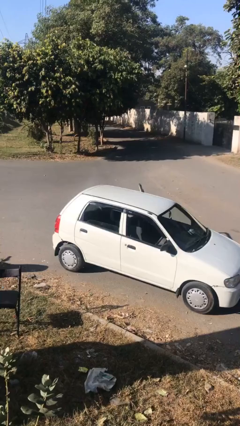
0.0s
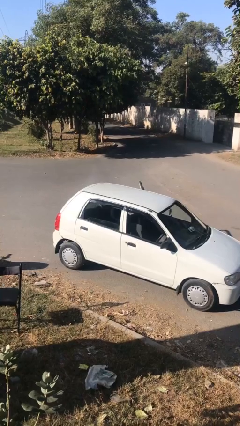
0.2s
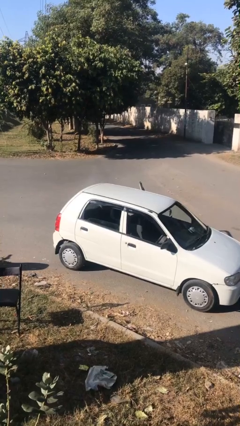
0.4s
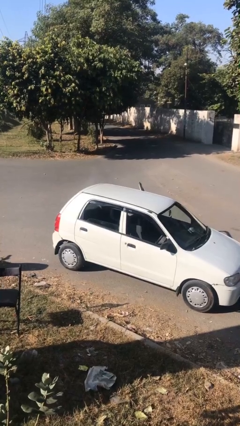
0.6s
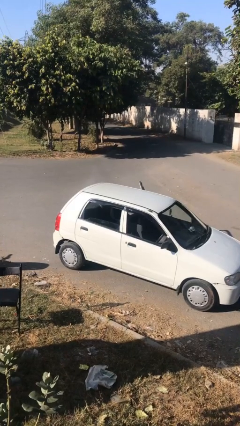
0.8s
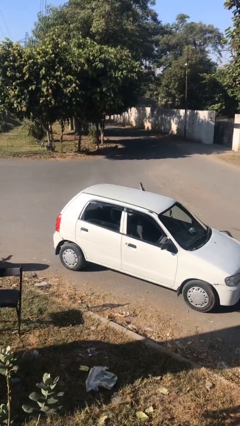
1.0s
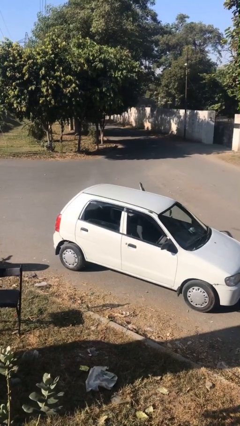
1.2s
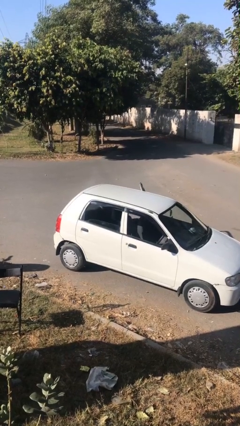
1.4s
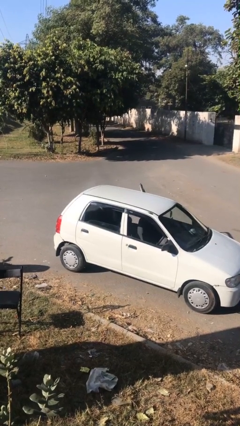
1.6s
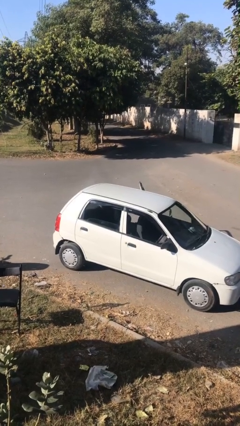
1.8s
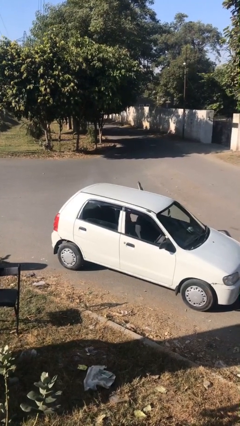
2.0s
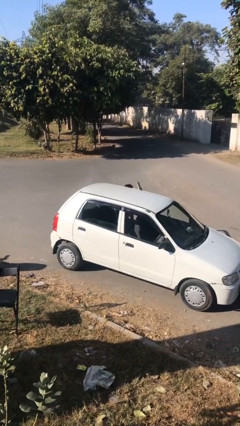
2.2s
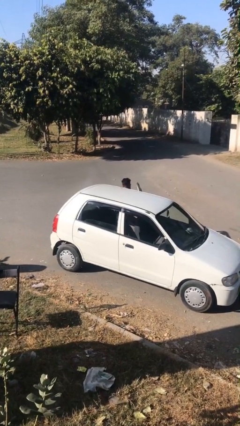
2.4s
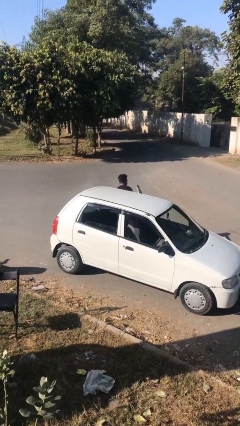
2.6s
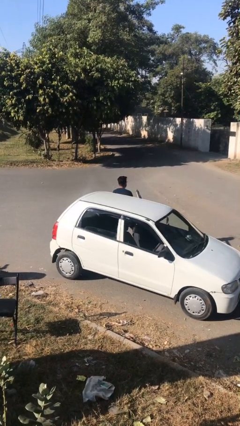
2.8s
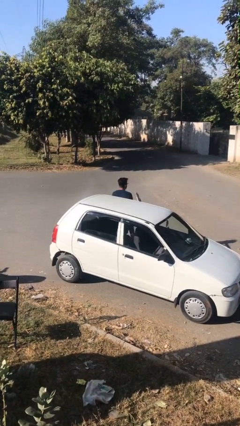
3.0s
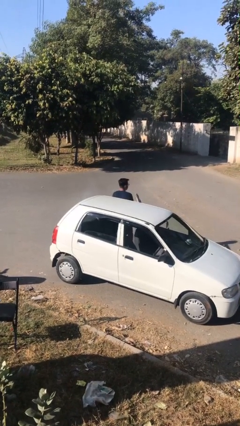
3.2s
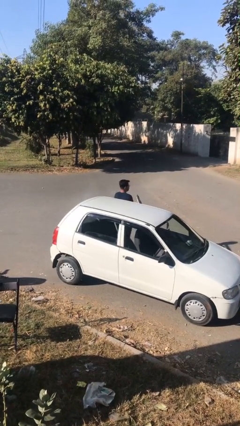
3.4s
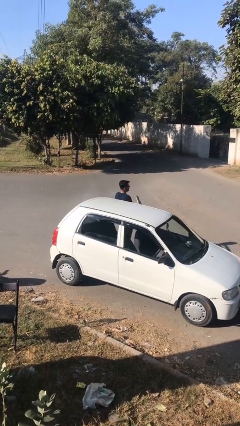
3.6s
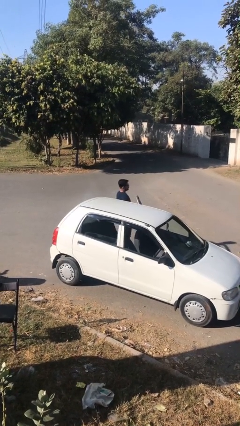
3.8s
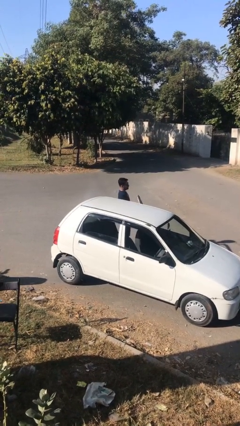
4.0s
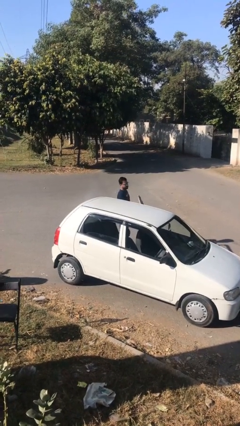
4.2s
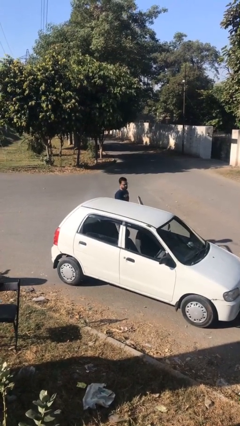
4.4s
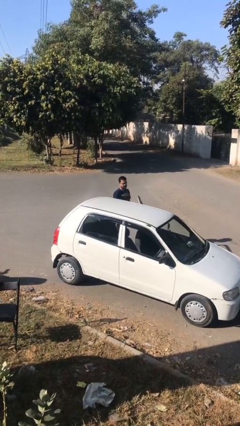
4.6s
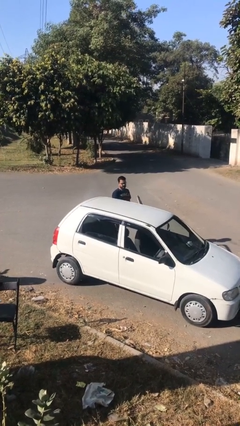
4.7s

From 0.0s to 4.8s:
person exits car

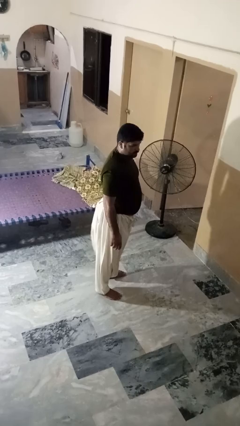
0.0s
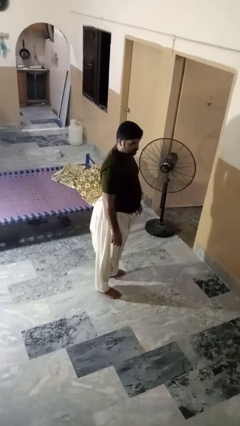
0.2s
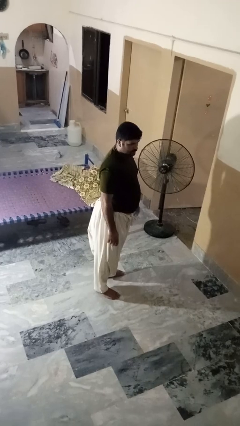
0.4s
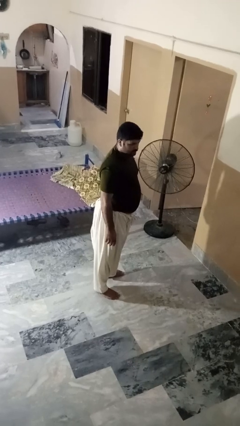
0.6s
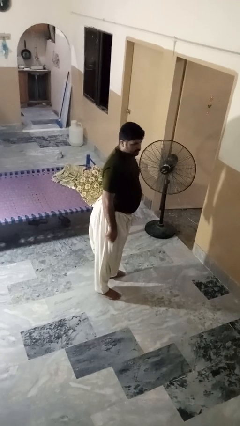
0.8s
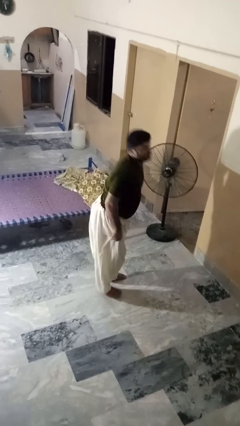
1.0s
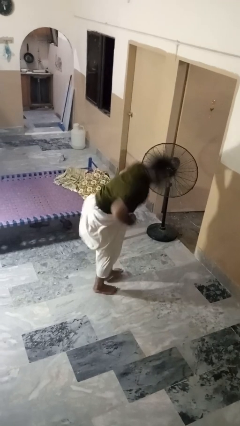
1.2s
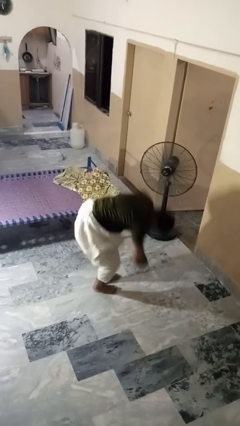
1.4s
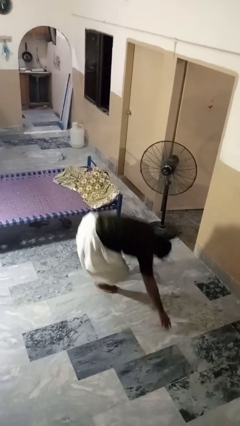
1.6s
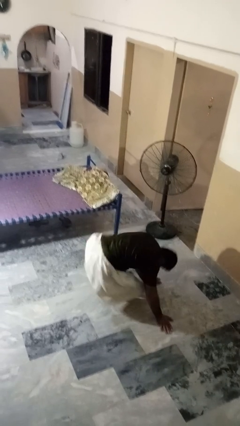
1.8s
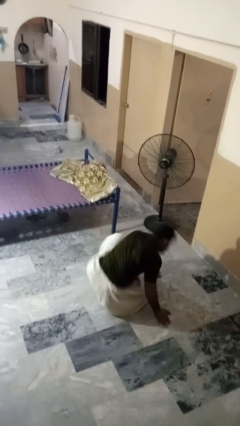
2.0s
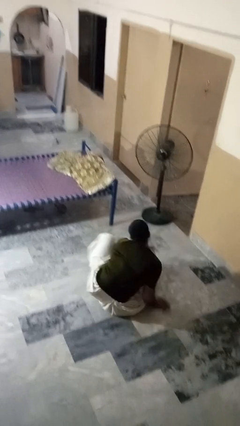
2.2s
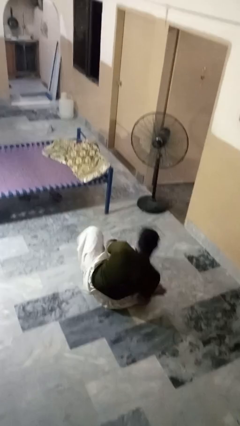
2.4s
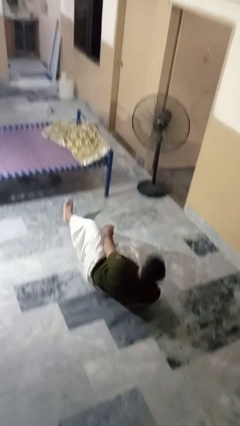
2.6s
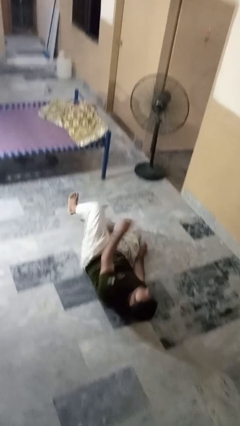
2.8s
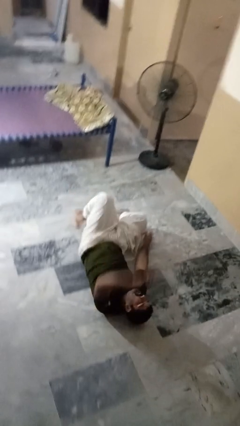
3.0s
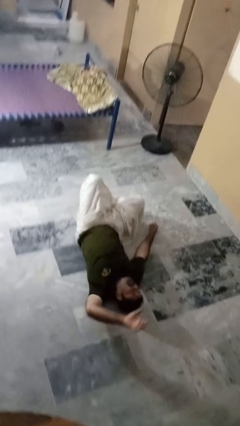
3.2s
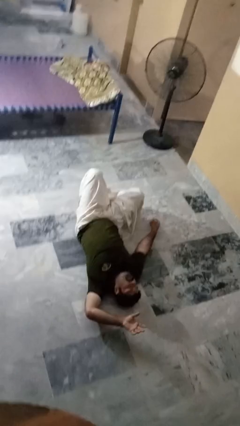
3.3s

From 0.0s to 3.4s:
person falls while standing

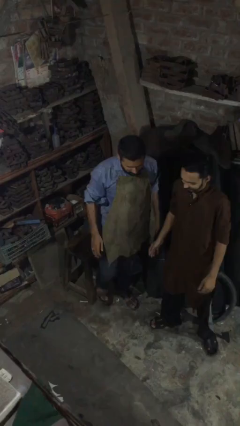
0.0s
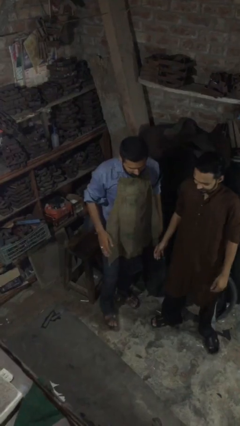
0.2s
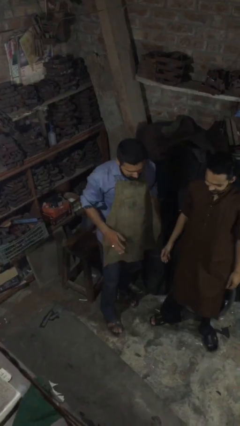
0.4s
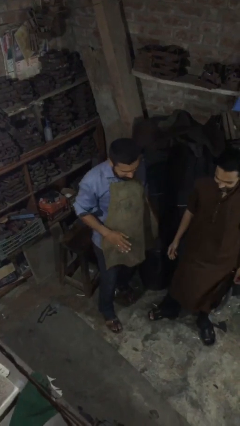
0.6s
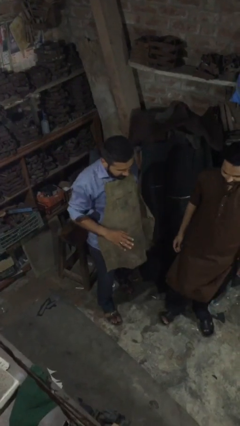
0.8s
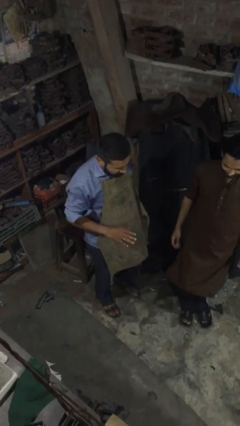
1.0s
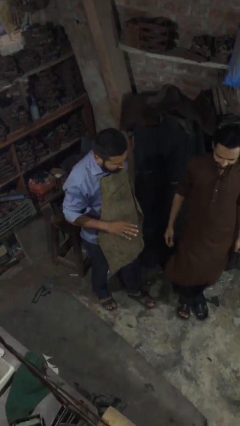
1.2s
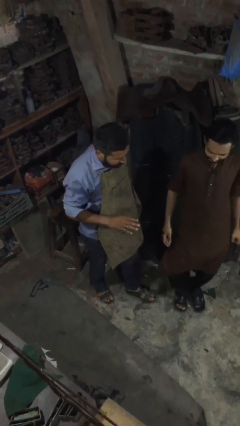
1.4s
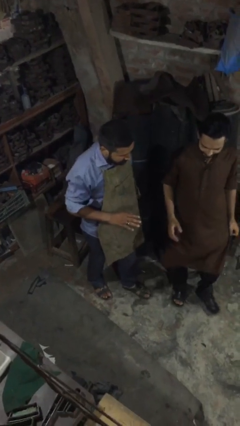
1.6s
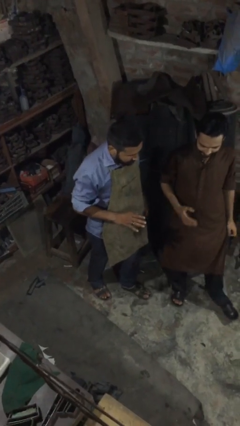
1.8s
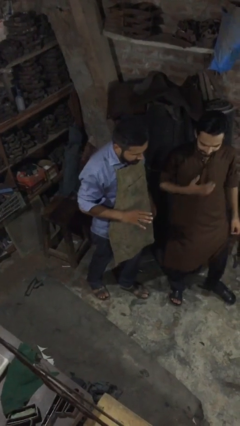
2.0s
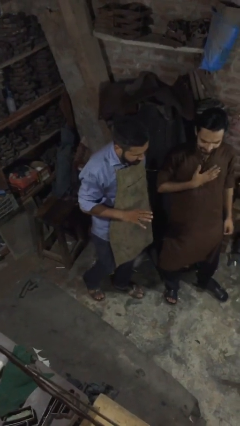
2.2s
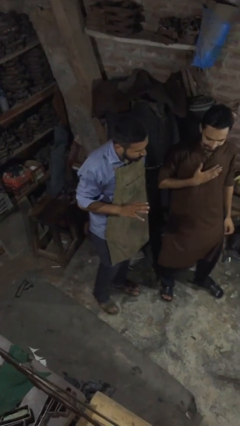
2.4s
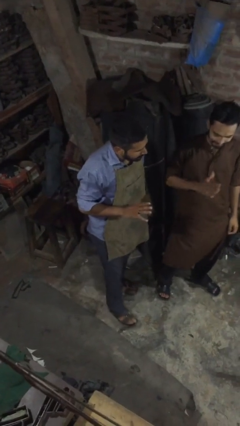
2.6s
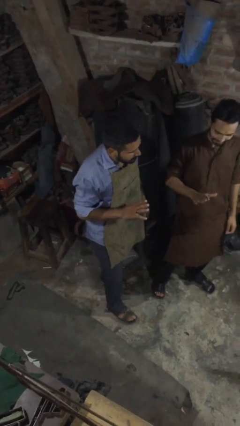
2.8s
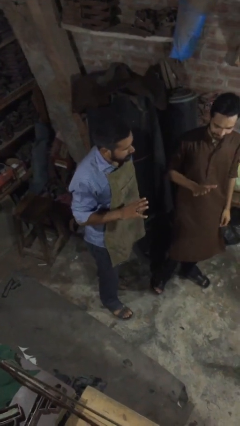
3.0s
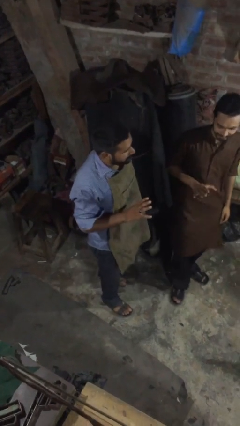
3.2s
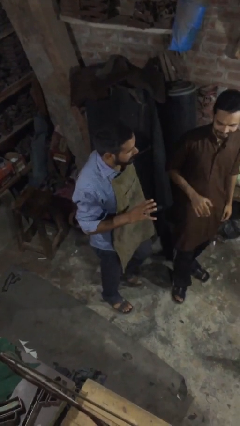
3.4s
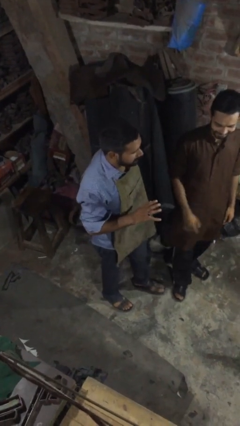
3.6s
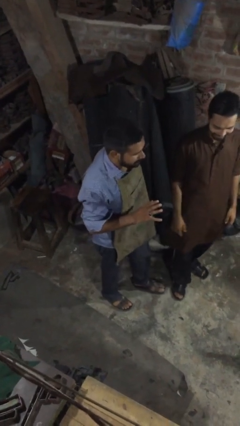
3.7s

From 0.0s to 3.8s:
person talks to person

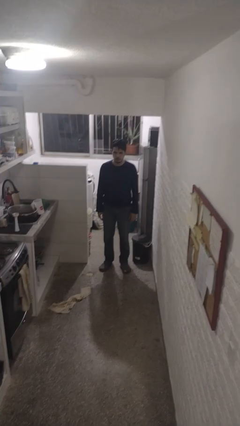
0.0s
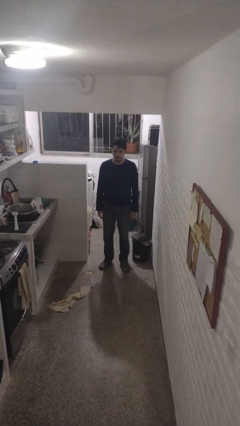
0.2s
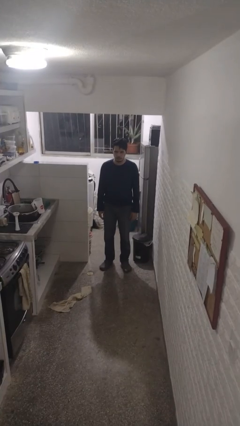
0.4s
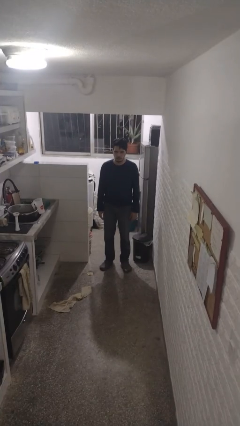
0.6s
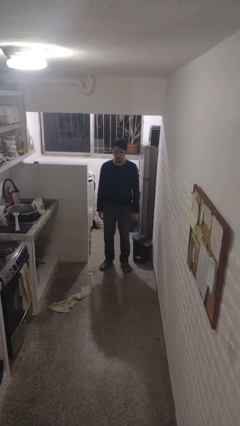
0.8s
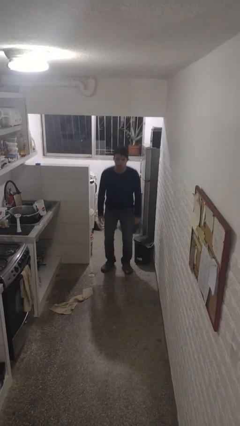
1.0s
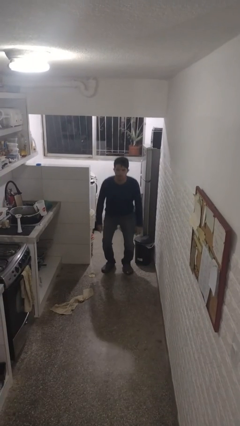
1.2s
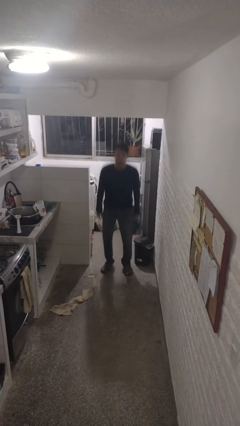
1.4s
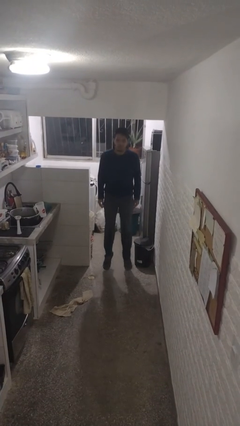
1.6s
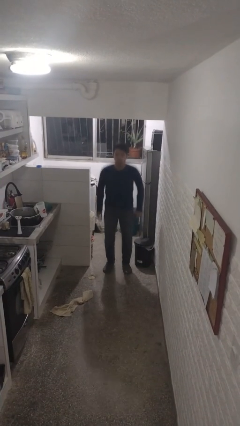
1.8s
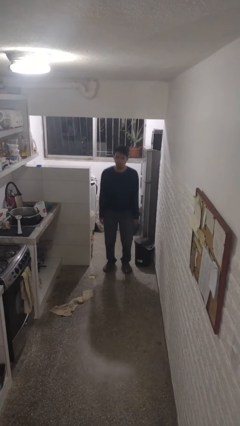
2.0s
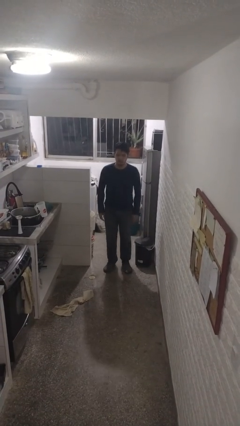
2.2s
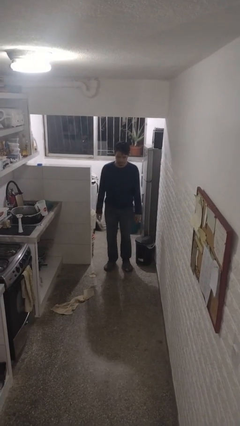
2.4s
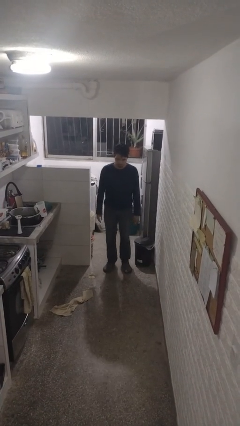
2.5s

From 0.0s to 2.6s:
person jumps

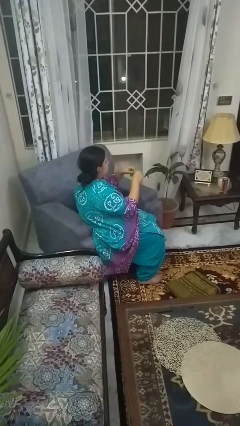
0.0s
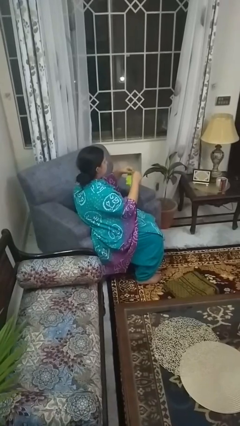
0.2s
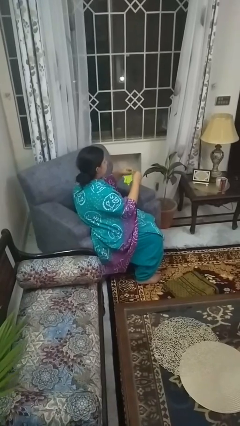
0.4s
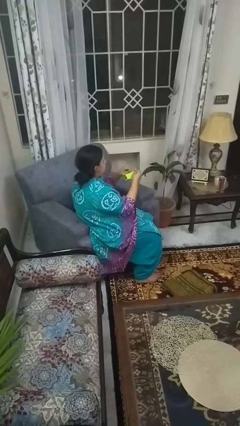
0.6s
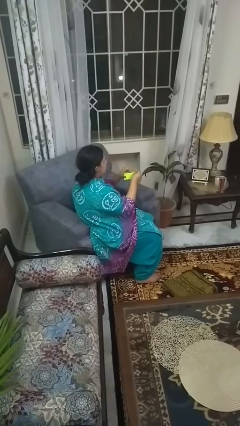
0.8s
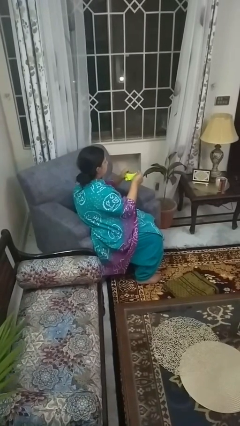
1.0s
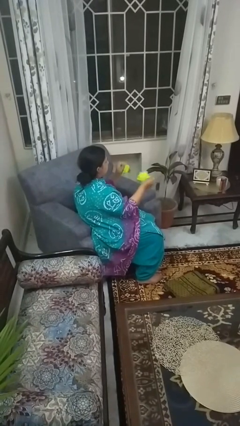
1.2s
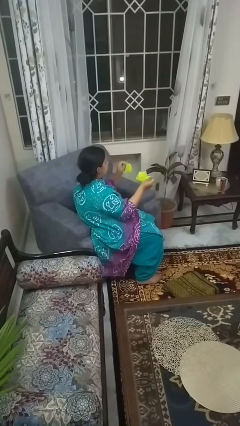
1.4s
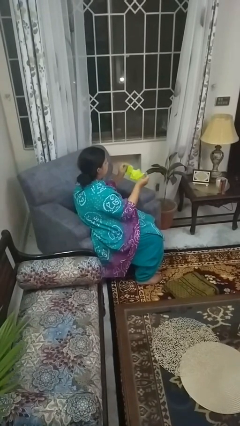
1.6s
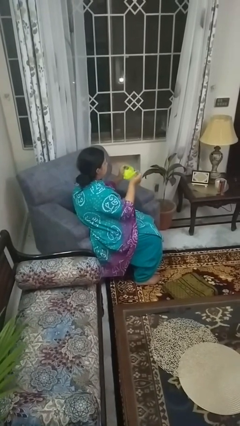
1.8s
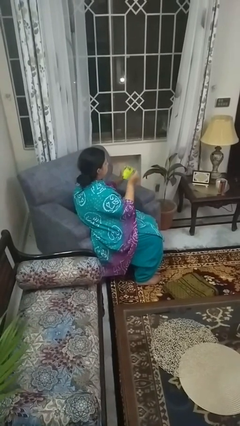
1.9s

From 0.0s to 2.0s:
person tears paper

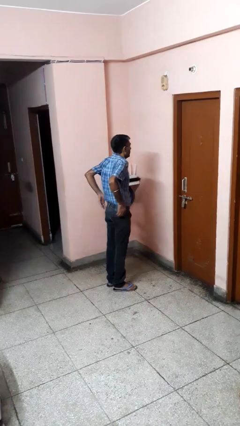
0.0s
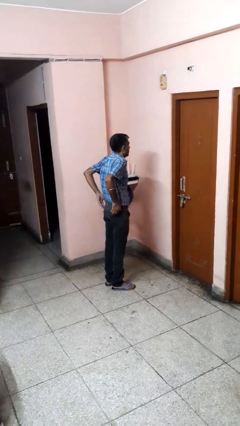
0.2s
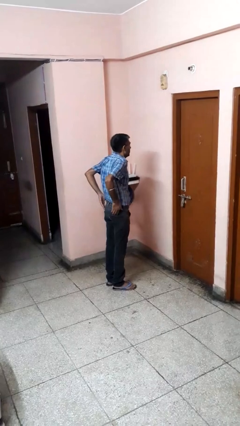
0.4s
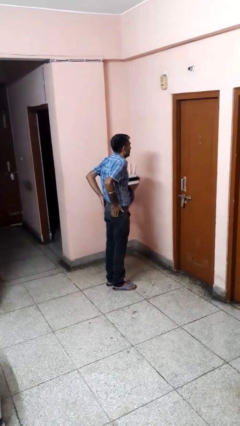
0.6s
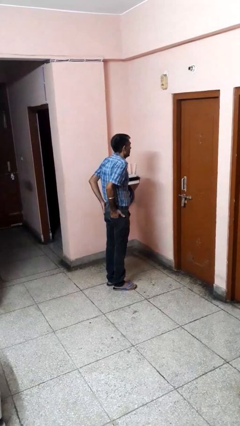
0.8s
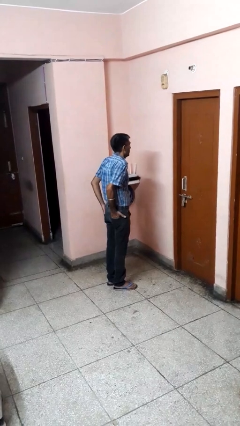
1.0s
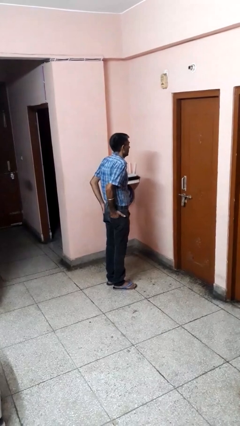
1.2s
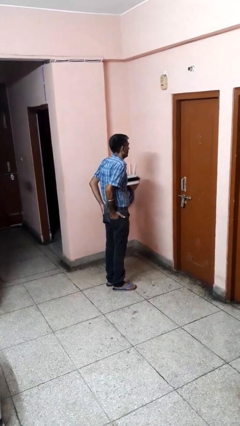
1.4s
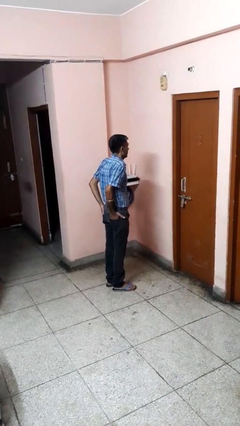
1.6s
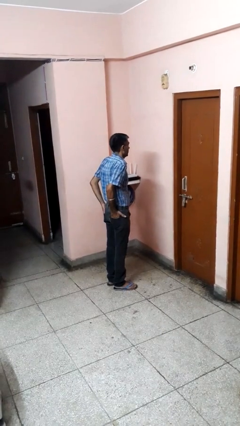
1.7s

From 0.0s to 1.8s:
person puts hands in back pockets
